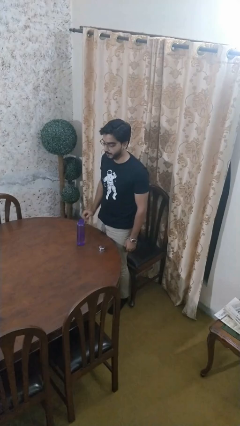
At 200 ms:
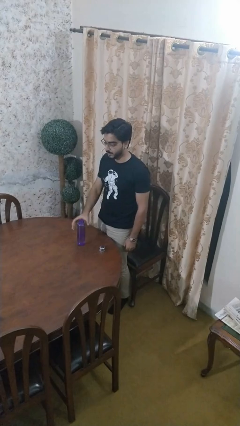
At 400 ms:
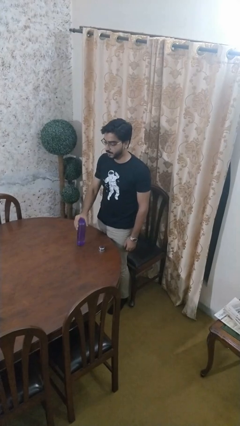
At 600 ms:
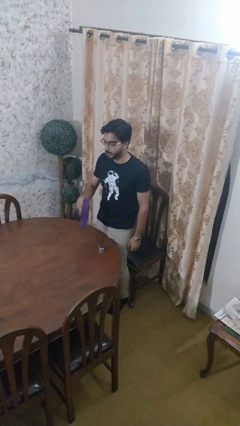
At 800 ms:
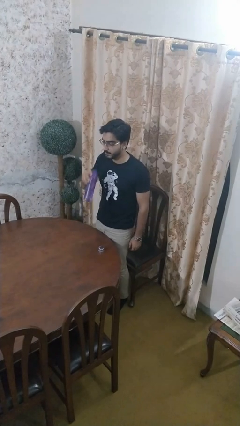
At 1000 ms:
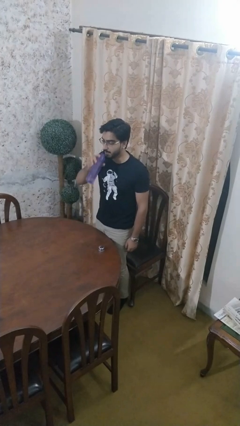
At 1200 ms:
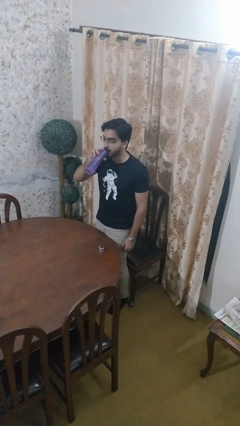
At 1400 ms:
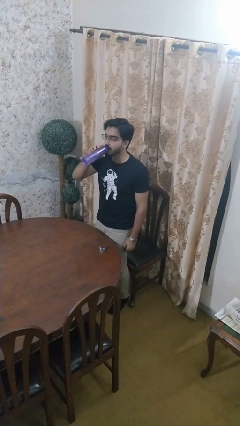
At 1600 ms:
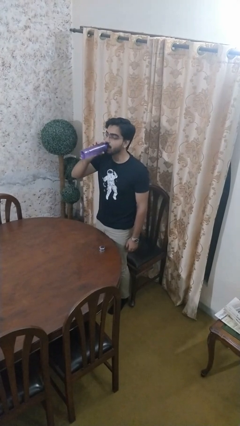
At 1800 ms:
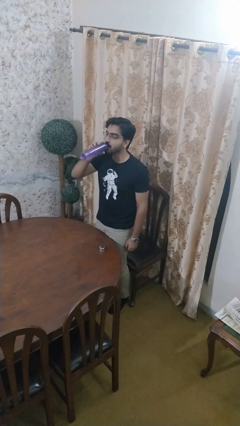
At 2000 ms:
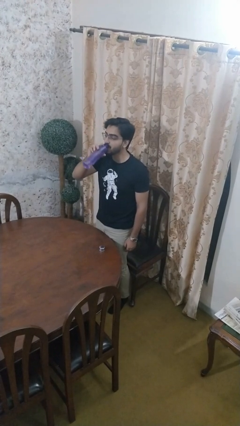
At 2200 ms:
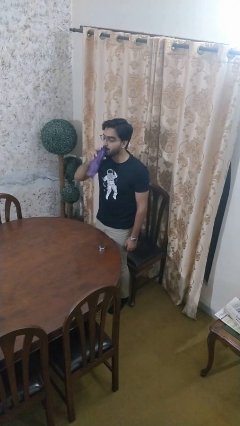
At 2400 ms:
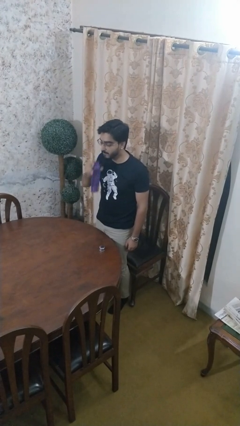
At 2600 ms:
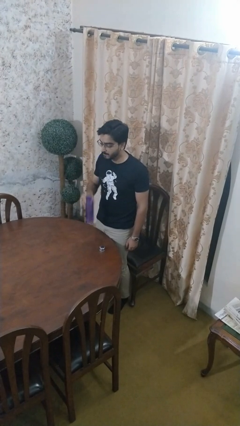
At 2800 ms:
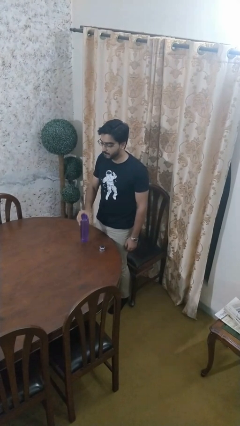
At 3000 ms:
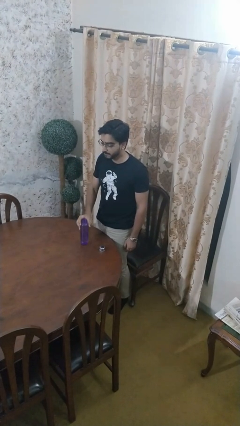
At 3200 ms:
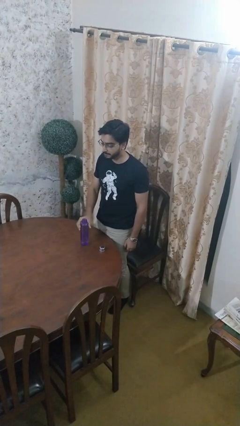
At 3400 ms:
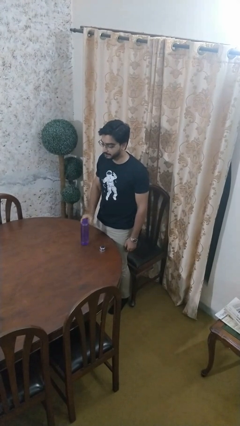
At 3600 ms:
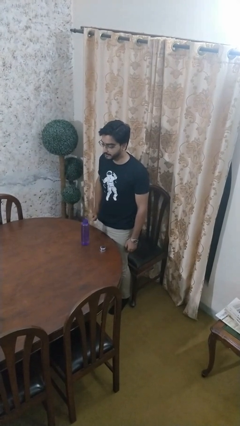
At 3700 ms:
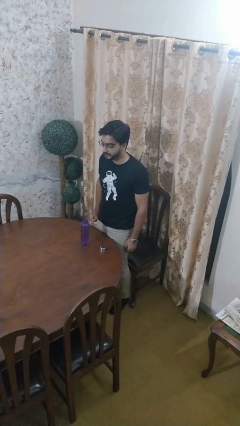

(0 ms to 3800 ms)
person drinks from bottle

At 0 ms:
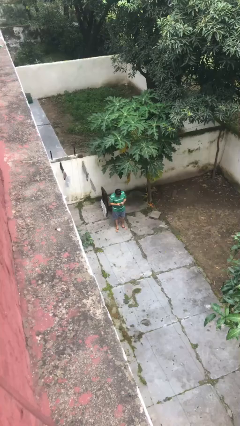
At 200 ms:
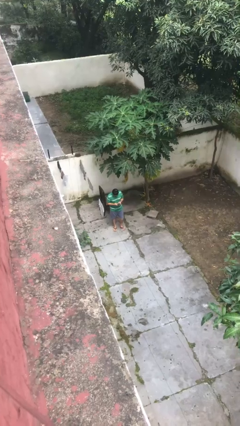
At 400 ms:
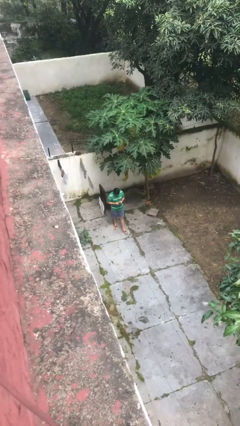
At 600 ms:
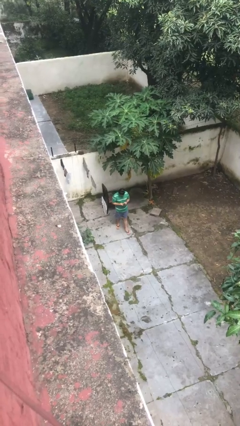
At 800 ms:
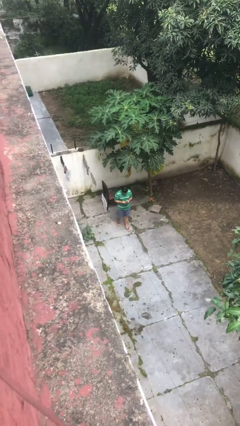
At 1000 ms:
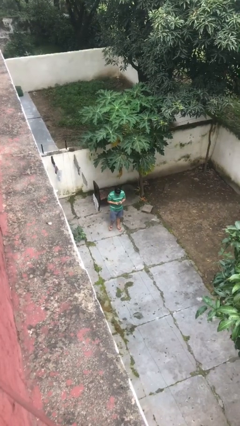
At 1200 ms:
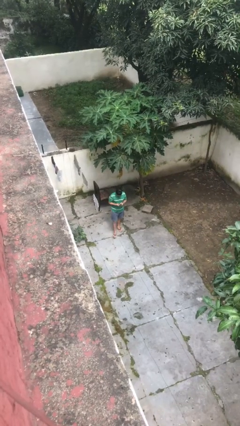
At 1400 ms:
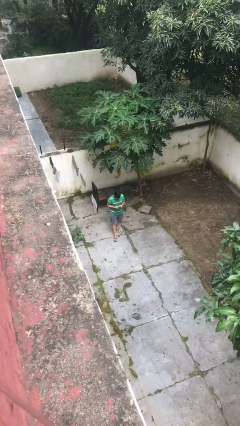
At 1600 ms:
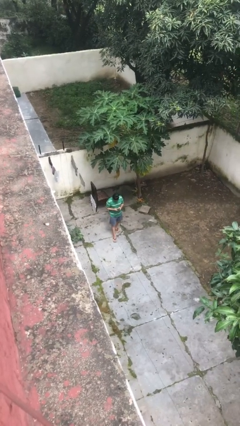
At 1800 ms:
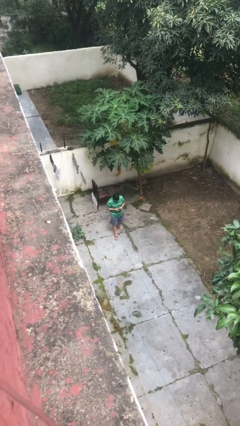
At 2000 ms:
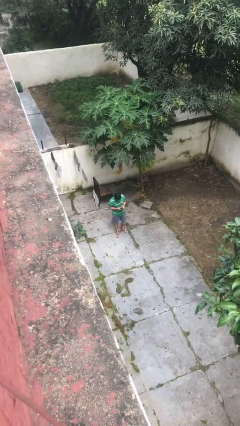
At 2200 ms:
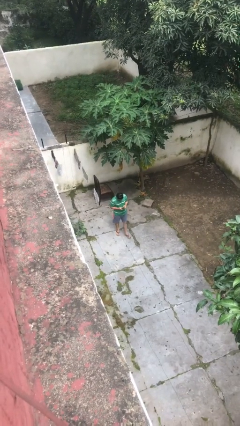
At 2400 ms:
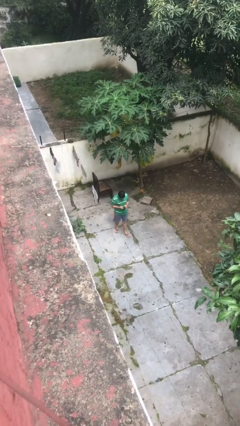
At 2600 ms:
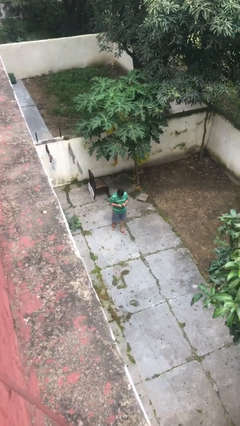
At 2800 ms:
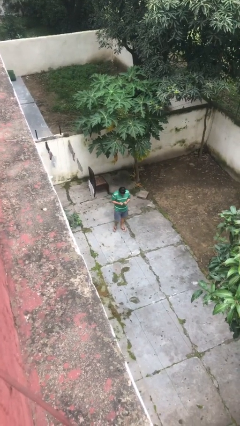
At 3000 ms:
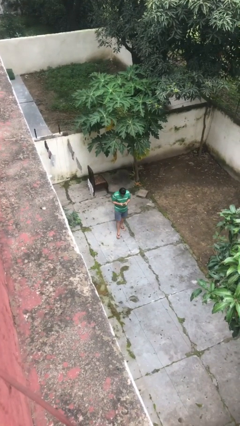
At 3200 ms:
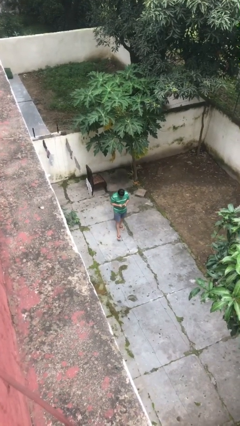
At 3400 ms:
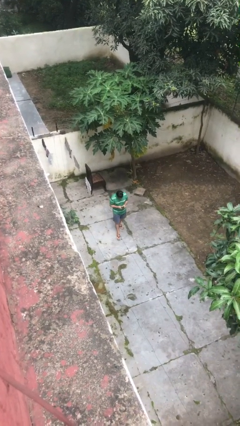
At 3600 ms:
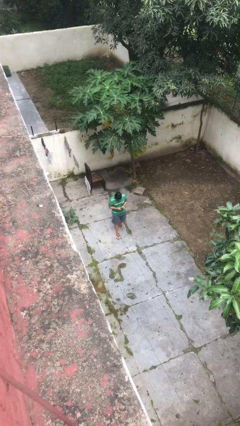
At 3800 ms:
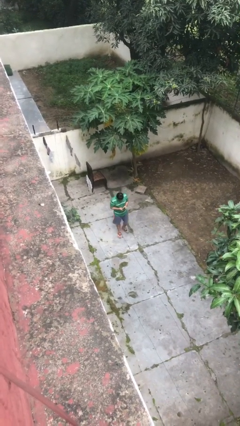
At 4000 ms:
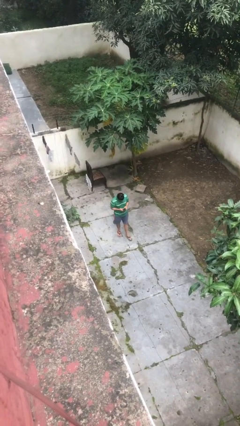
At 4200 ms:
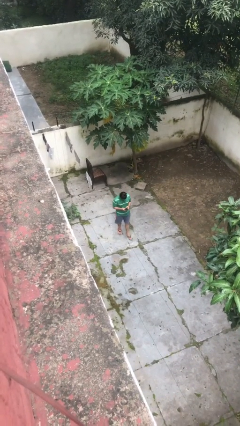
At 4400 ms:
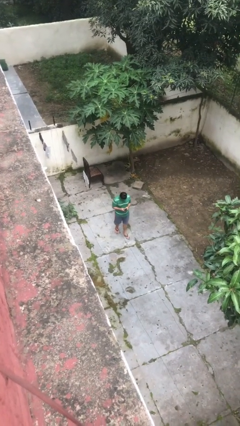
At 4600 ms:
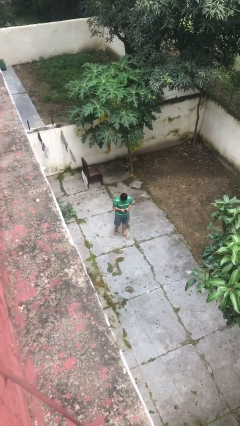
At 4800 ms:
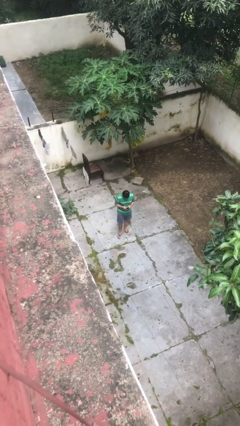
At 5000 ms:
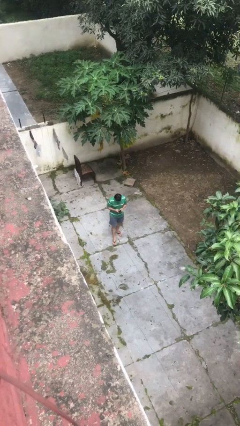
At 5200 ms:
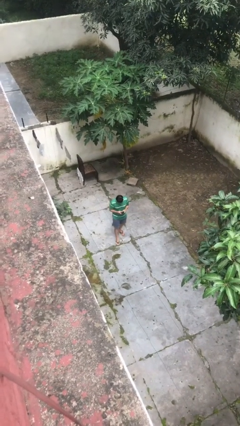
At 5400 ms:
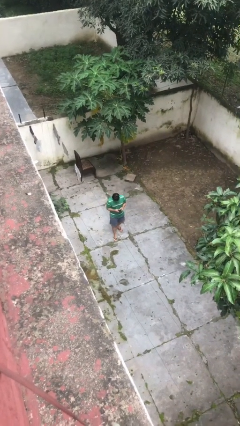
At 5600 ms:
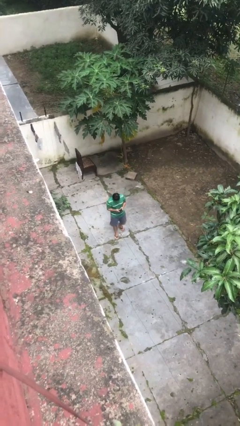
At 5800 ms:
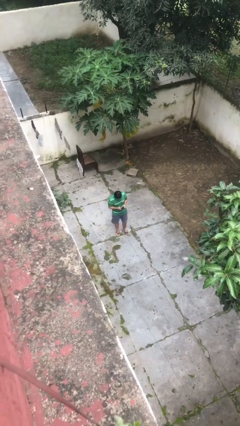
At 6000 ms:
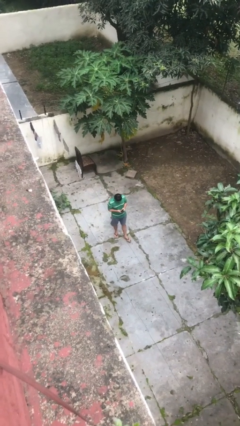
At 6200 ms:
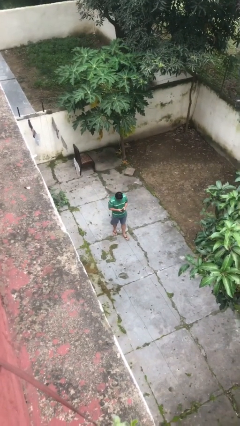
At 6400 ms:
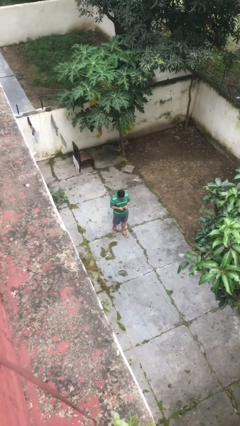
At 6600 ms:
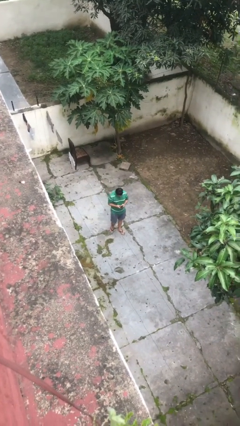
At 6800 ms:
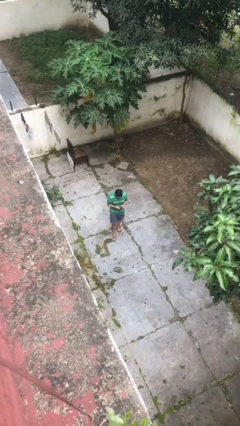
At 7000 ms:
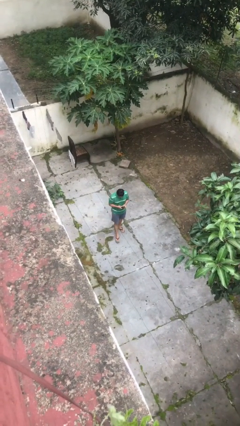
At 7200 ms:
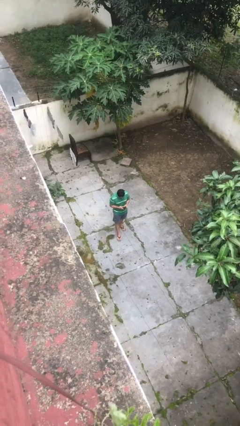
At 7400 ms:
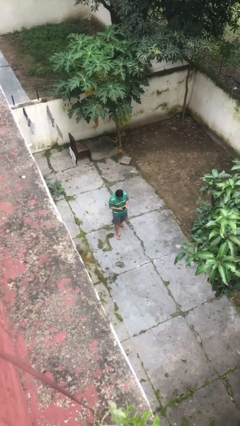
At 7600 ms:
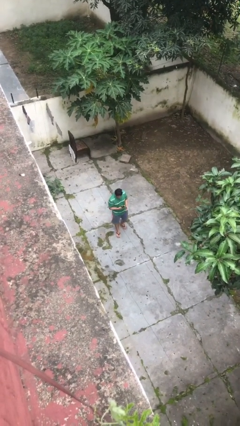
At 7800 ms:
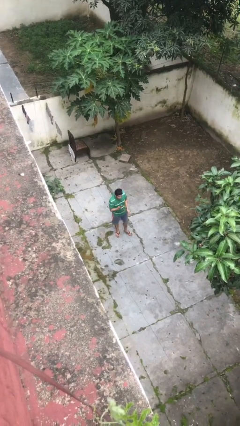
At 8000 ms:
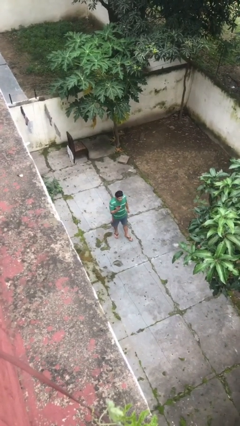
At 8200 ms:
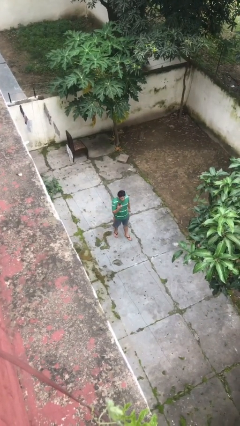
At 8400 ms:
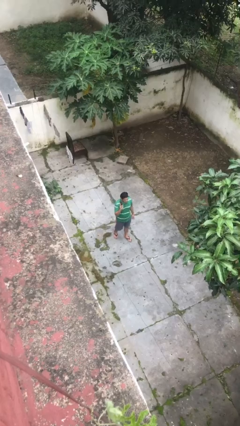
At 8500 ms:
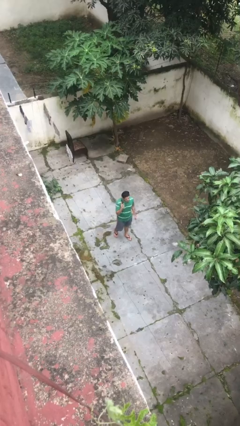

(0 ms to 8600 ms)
person texts on phone

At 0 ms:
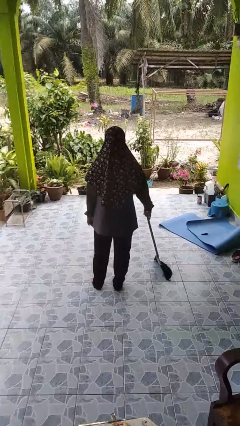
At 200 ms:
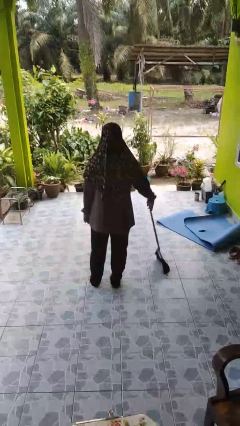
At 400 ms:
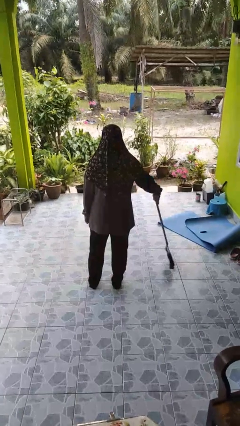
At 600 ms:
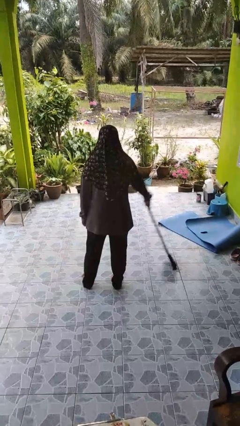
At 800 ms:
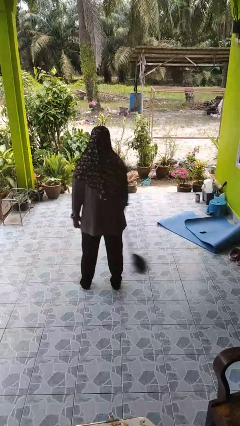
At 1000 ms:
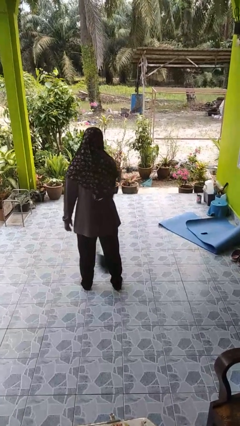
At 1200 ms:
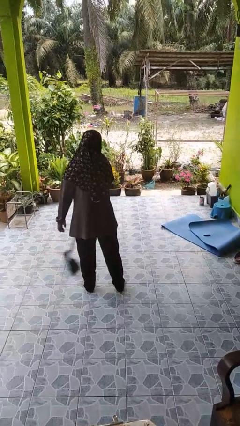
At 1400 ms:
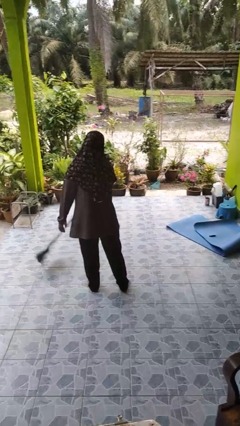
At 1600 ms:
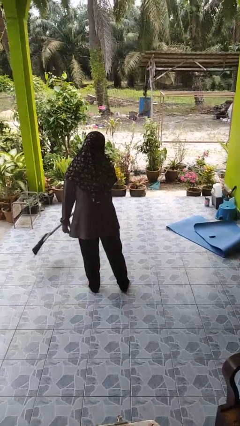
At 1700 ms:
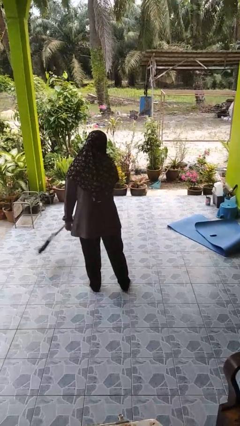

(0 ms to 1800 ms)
person sweeps floor

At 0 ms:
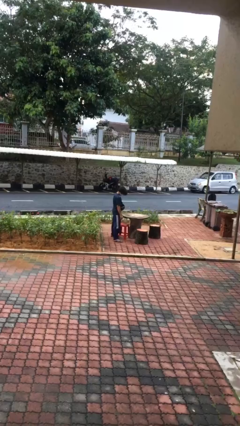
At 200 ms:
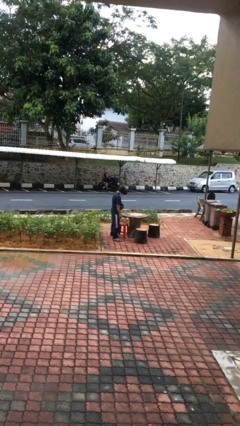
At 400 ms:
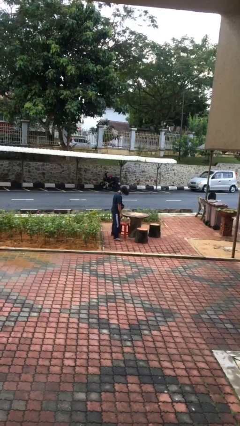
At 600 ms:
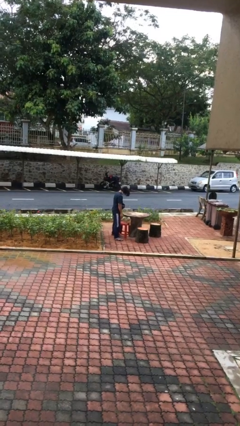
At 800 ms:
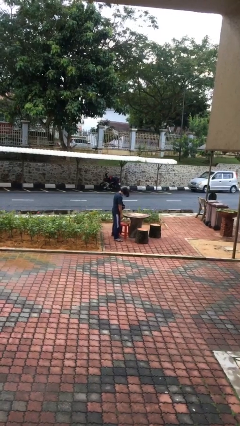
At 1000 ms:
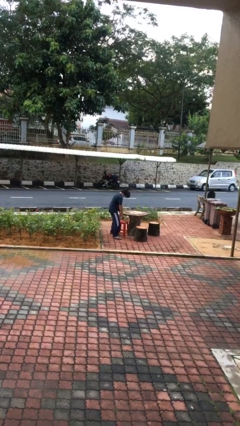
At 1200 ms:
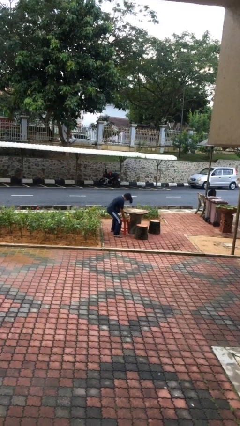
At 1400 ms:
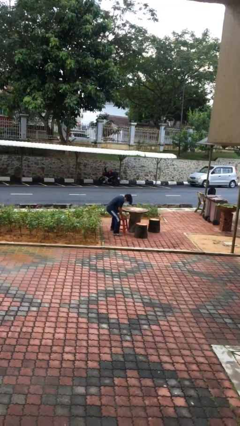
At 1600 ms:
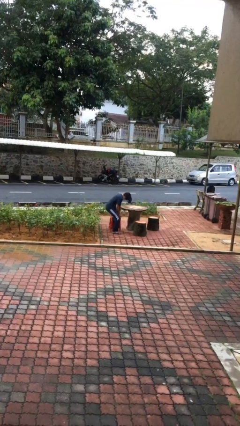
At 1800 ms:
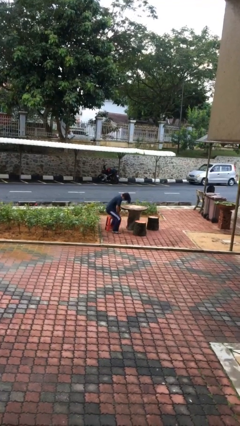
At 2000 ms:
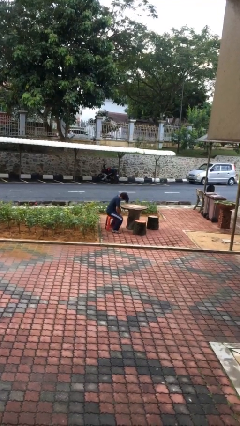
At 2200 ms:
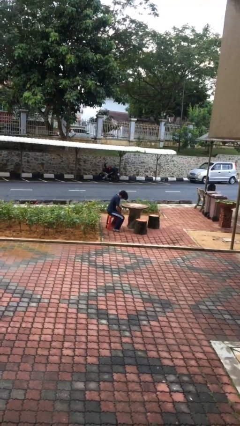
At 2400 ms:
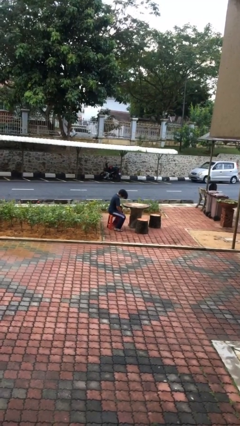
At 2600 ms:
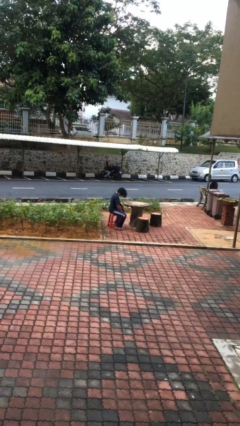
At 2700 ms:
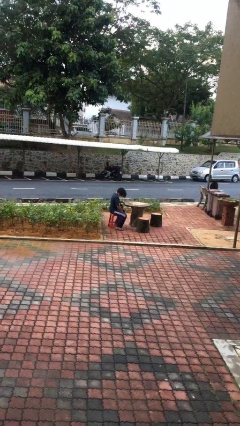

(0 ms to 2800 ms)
person sits down

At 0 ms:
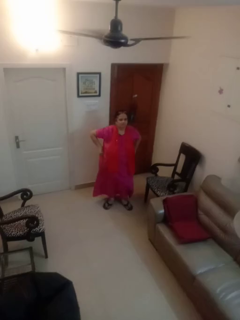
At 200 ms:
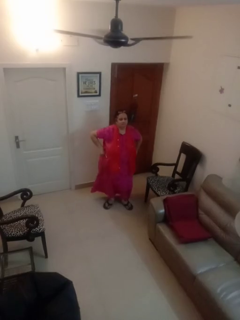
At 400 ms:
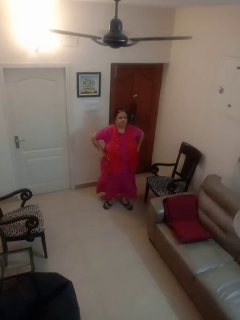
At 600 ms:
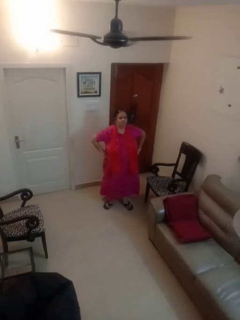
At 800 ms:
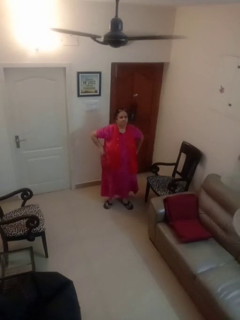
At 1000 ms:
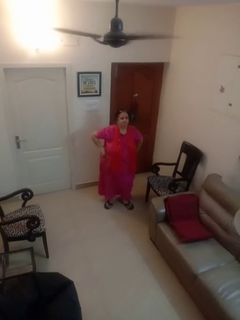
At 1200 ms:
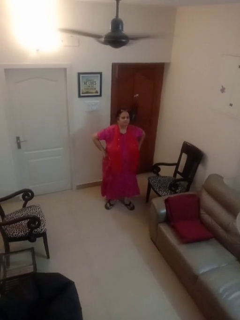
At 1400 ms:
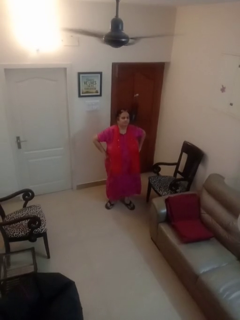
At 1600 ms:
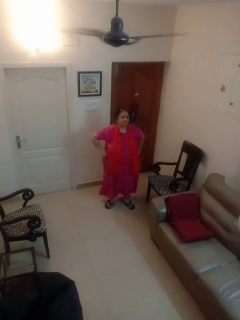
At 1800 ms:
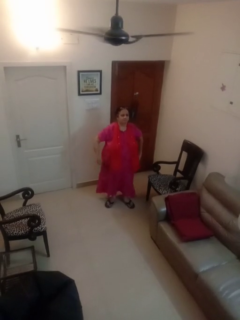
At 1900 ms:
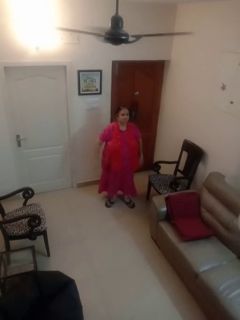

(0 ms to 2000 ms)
person wiggles hips
